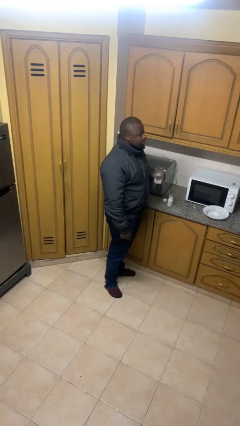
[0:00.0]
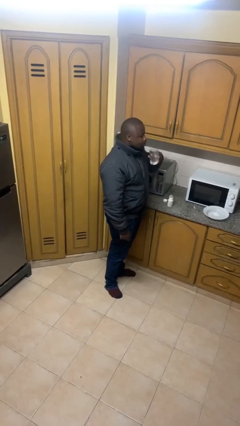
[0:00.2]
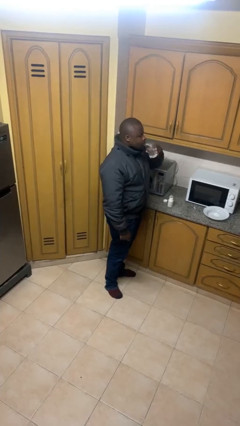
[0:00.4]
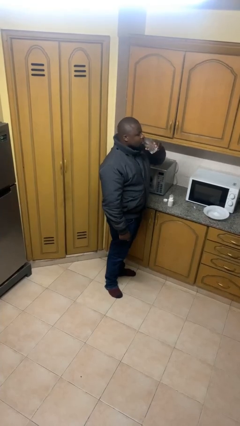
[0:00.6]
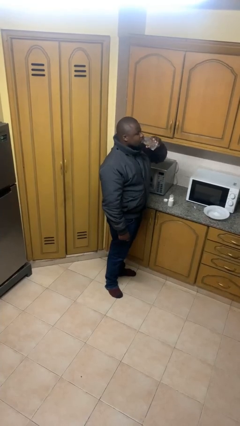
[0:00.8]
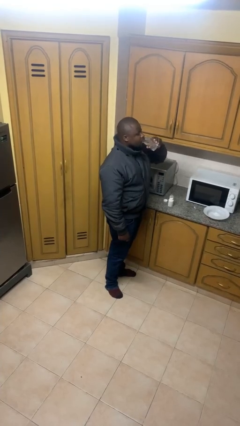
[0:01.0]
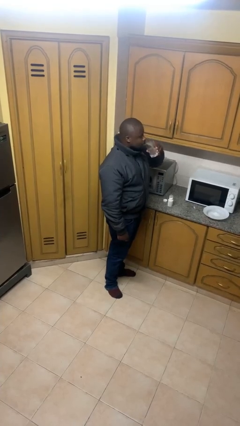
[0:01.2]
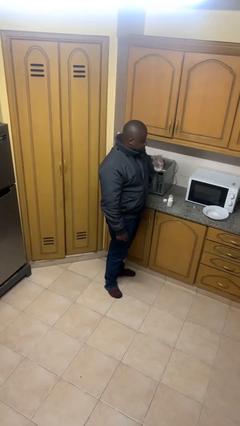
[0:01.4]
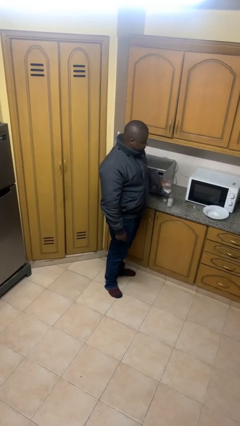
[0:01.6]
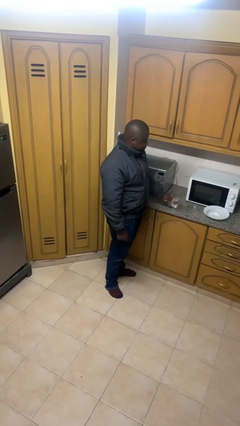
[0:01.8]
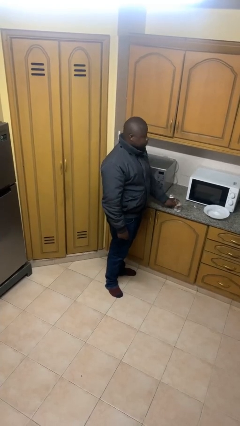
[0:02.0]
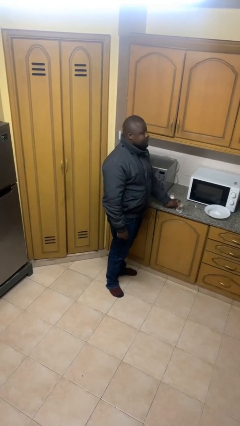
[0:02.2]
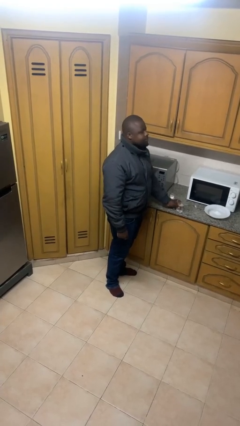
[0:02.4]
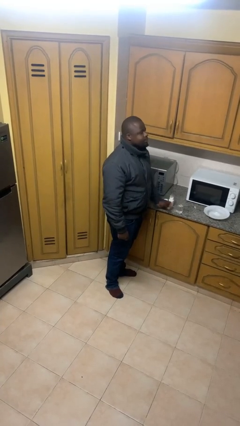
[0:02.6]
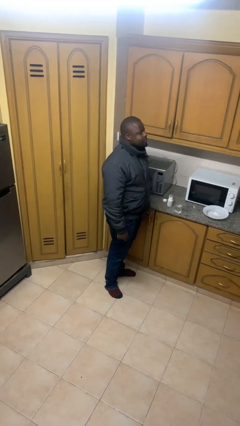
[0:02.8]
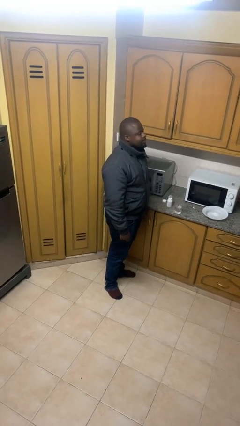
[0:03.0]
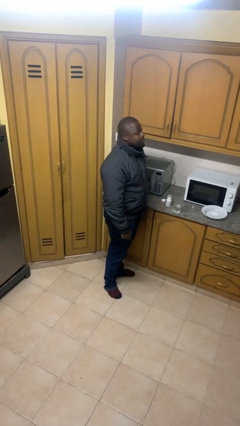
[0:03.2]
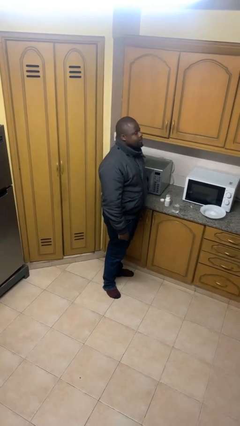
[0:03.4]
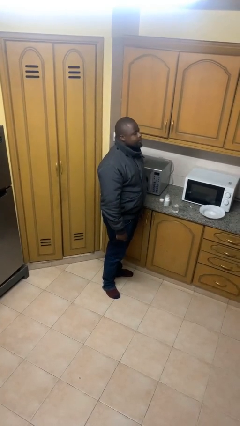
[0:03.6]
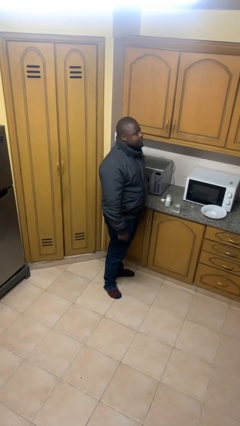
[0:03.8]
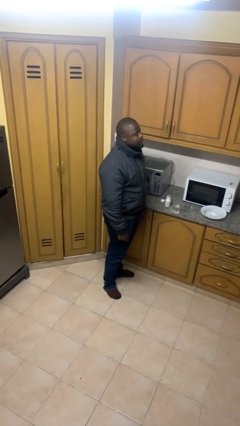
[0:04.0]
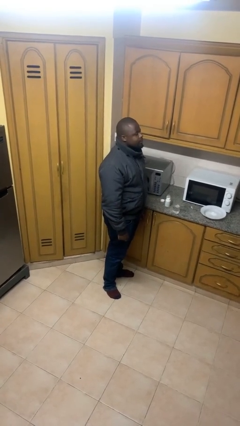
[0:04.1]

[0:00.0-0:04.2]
person drinks from cup

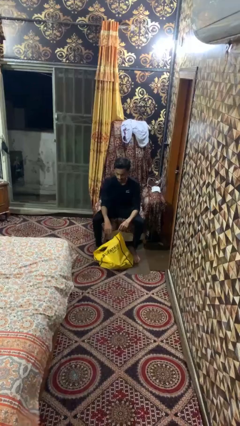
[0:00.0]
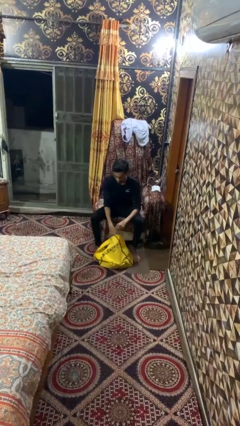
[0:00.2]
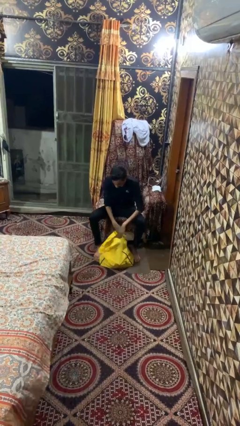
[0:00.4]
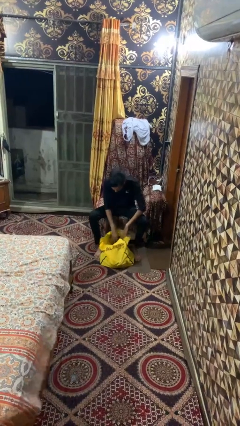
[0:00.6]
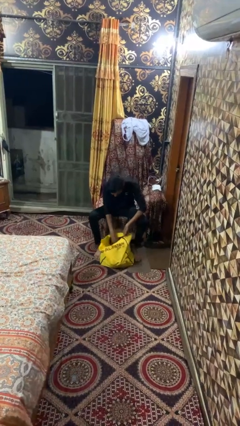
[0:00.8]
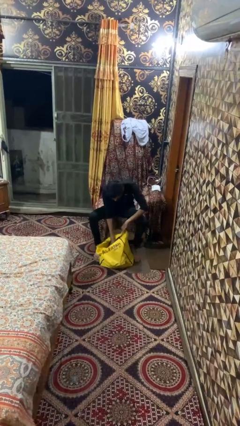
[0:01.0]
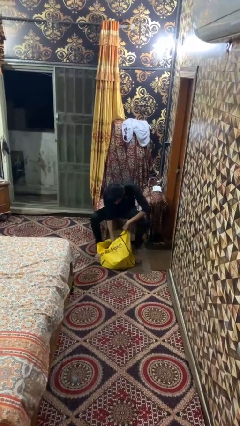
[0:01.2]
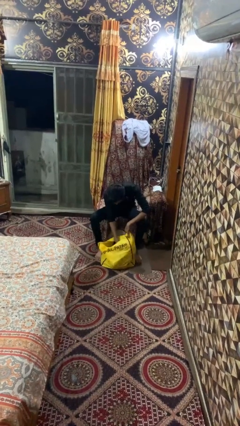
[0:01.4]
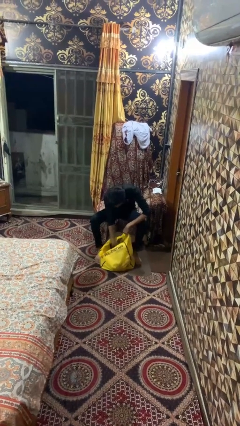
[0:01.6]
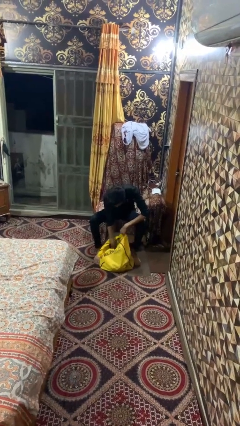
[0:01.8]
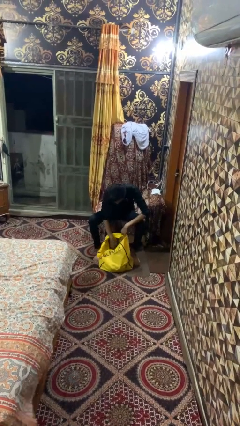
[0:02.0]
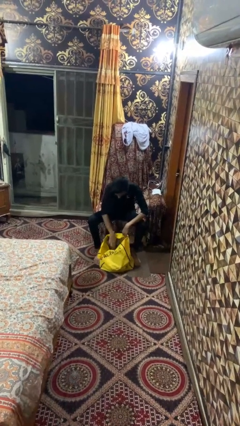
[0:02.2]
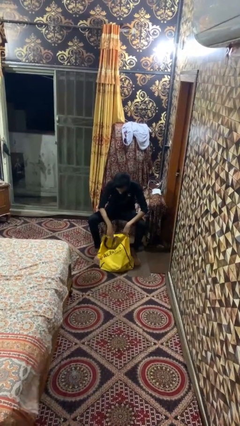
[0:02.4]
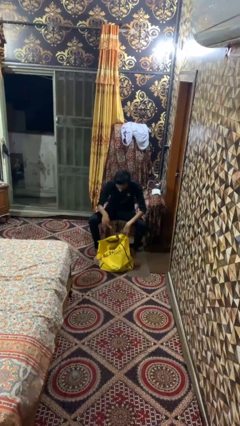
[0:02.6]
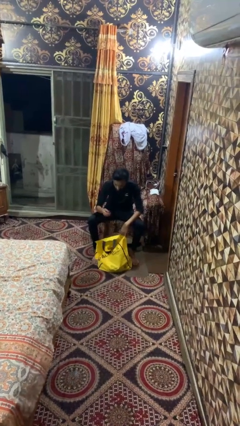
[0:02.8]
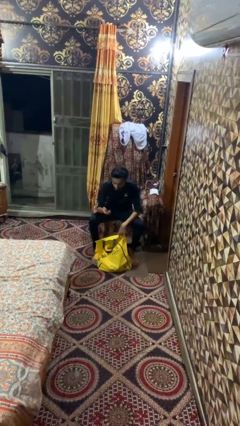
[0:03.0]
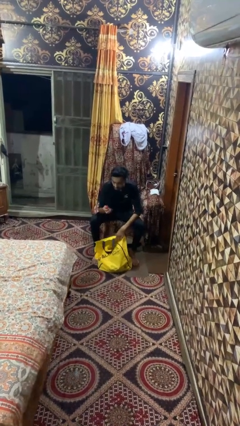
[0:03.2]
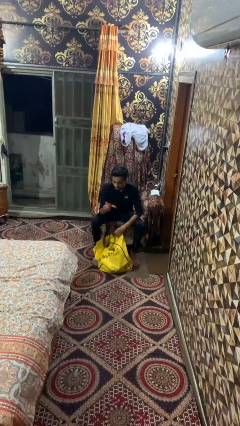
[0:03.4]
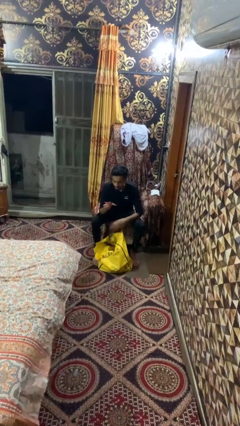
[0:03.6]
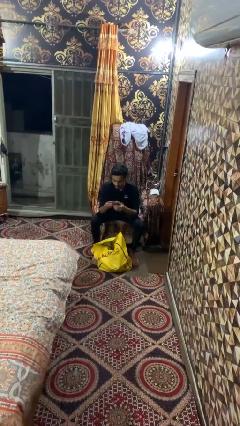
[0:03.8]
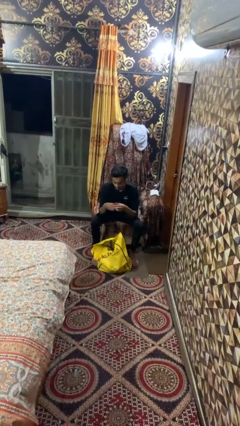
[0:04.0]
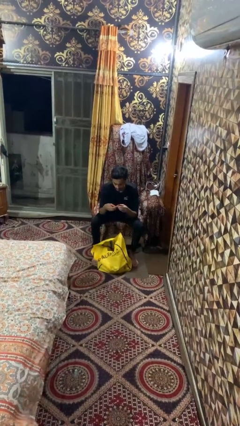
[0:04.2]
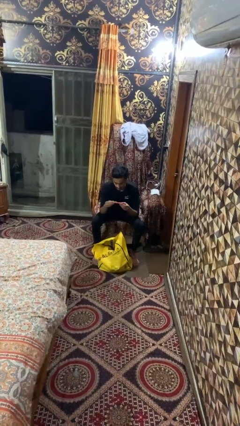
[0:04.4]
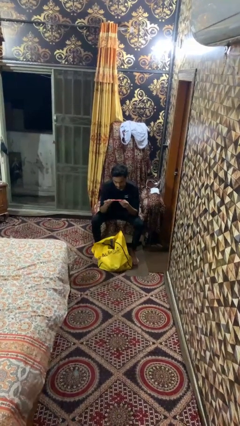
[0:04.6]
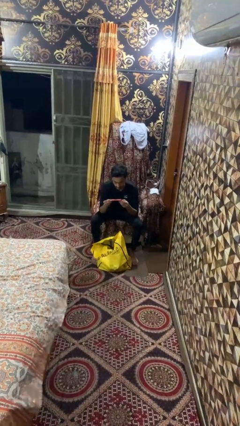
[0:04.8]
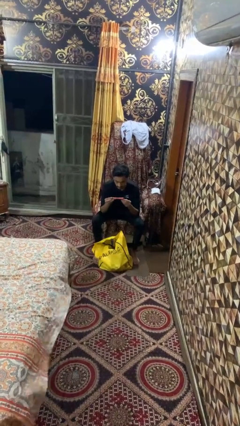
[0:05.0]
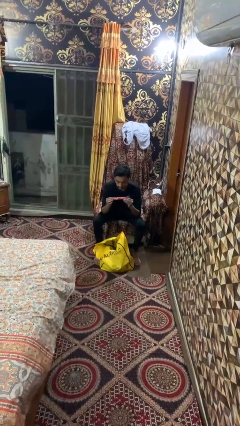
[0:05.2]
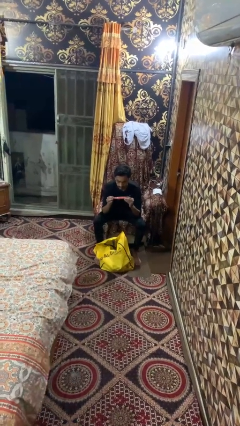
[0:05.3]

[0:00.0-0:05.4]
person takes object from bag

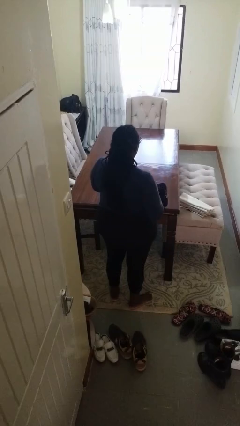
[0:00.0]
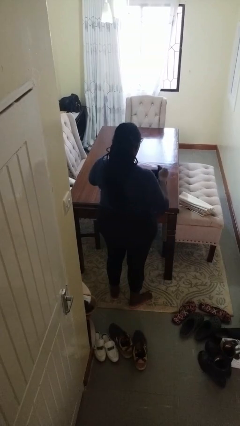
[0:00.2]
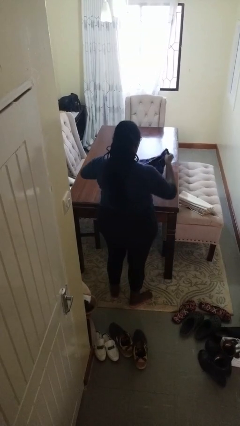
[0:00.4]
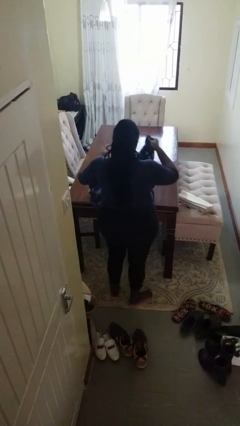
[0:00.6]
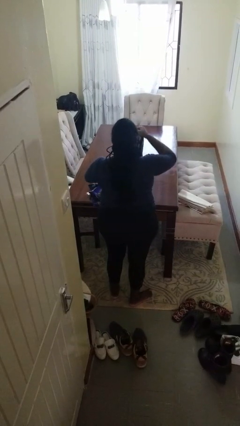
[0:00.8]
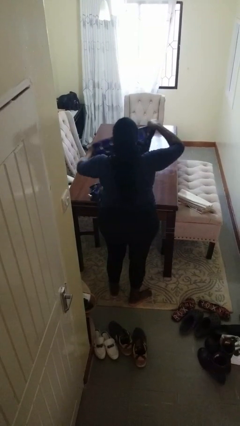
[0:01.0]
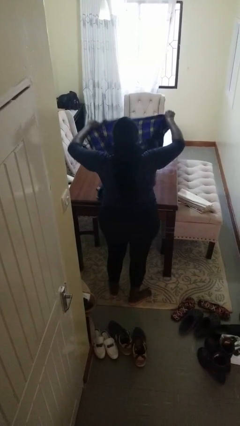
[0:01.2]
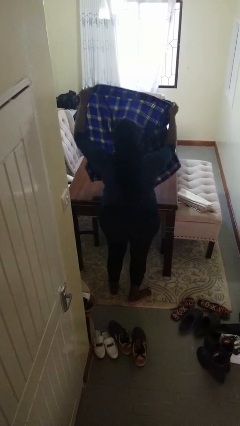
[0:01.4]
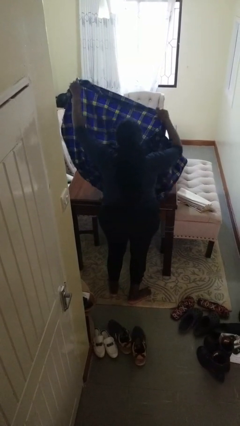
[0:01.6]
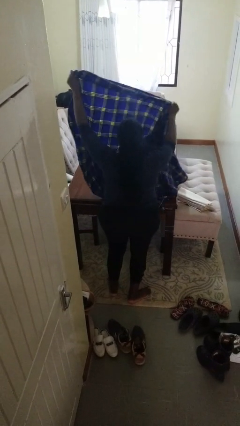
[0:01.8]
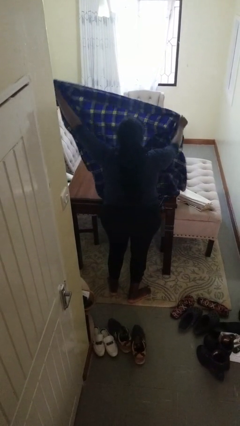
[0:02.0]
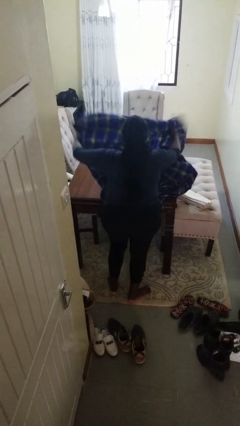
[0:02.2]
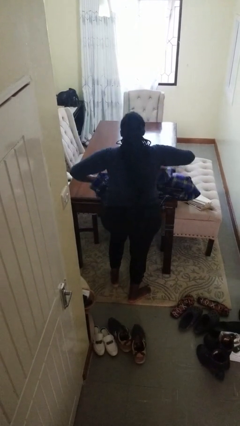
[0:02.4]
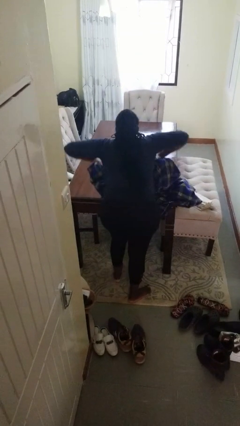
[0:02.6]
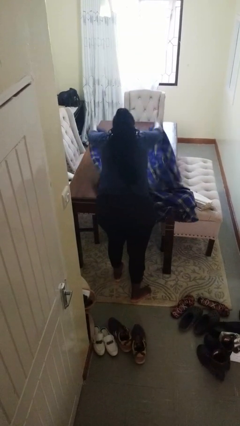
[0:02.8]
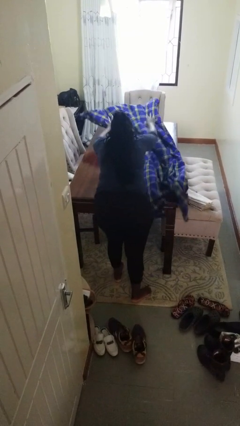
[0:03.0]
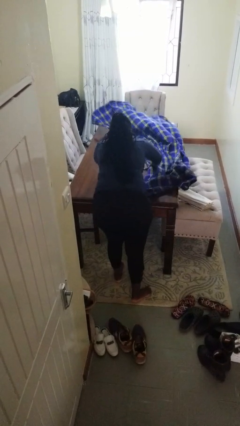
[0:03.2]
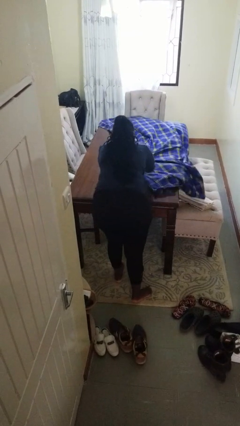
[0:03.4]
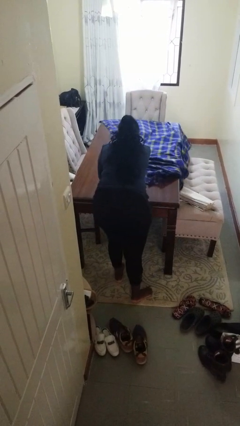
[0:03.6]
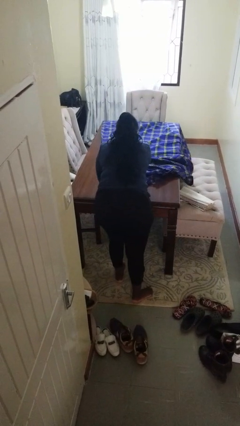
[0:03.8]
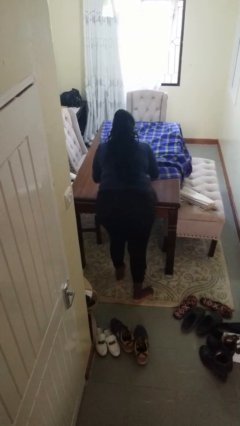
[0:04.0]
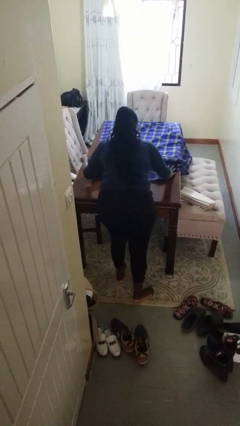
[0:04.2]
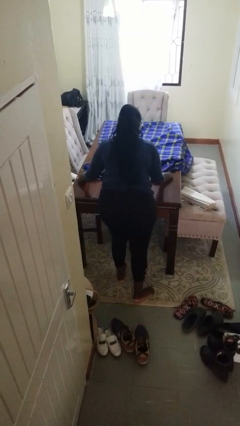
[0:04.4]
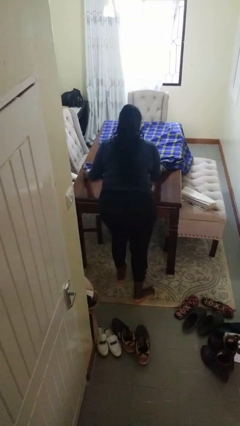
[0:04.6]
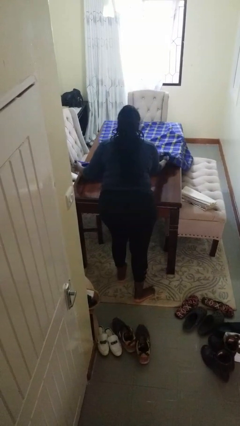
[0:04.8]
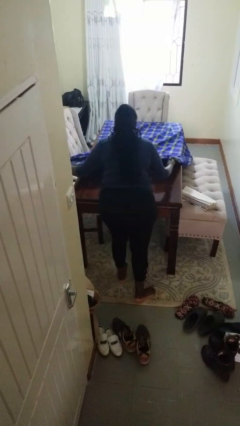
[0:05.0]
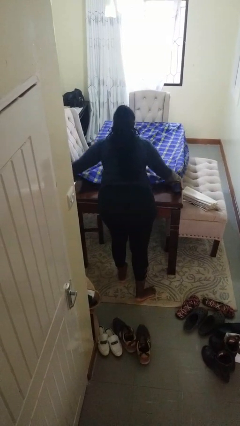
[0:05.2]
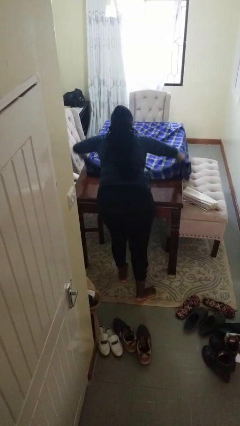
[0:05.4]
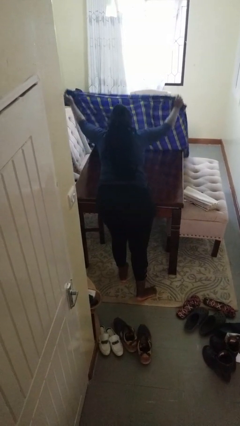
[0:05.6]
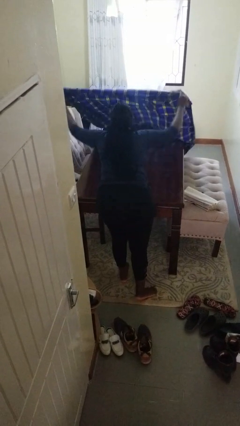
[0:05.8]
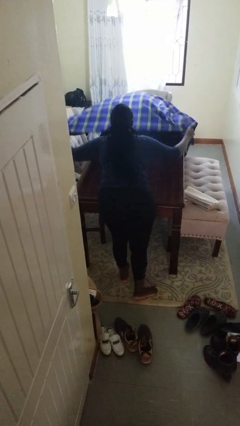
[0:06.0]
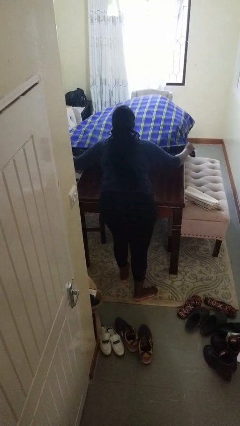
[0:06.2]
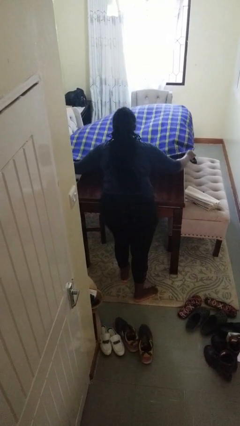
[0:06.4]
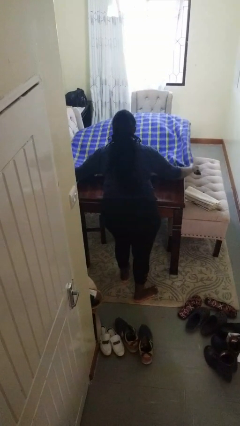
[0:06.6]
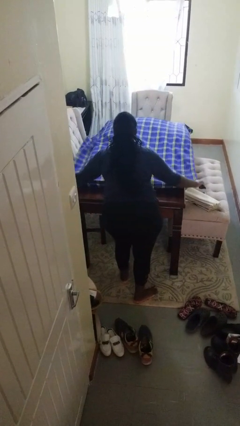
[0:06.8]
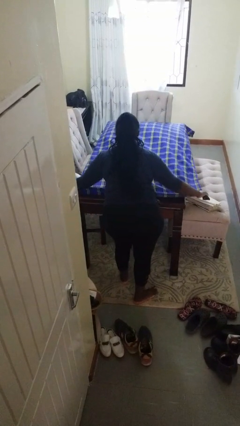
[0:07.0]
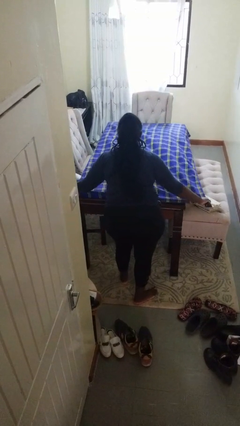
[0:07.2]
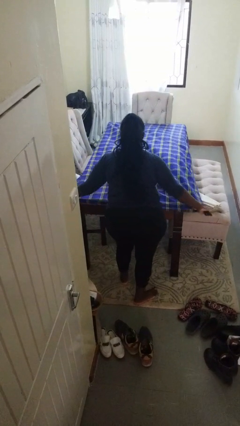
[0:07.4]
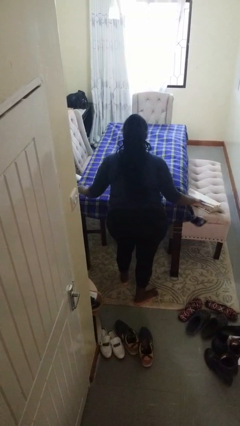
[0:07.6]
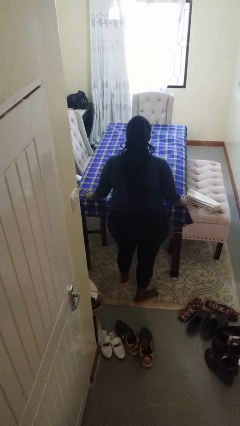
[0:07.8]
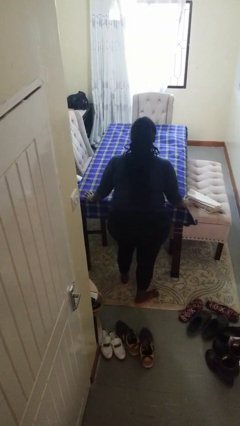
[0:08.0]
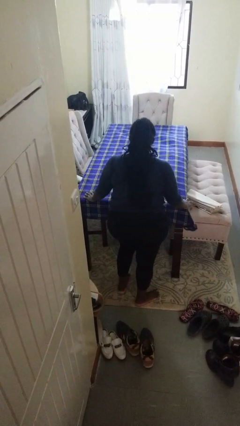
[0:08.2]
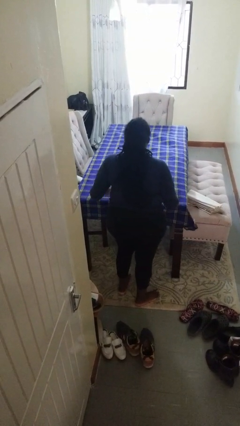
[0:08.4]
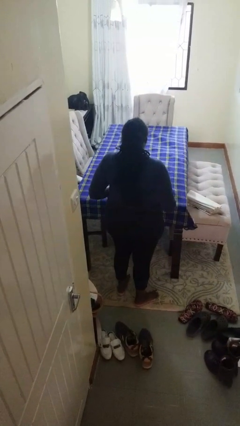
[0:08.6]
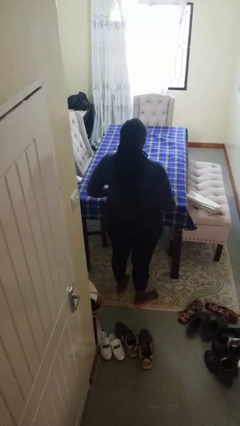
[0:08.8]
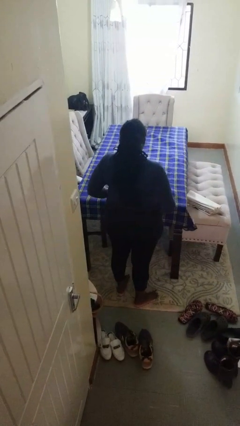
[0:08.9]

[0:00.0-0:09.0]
person spreads tablecloth
